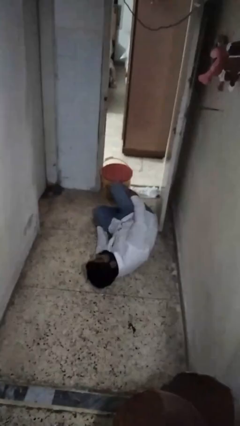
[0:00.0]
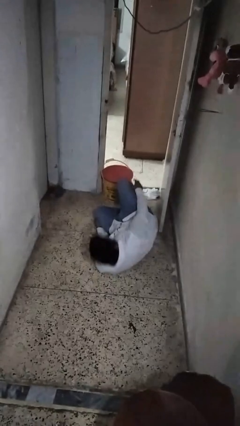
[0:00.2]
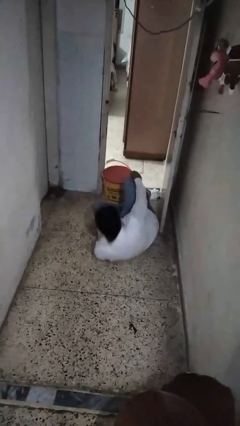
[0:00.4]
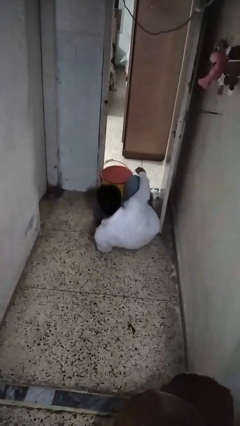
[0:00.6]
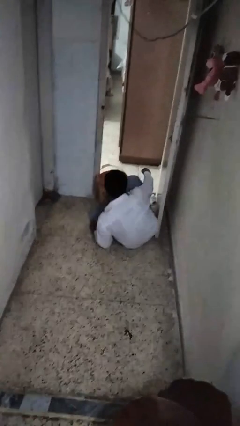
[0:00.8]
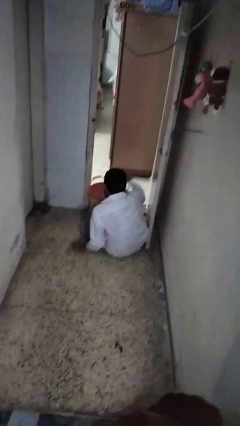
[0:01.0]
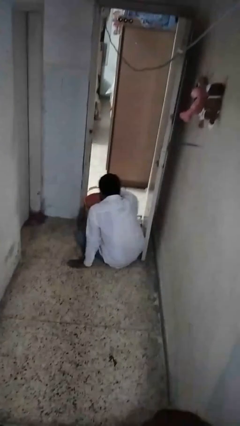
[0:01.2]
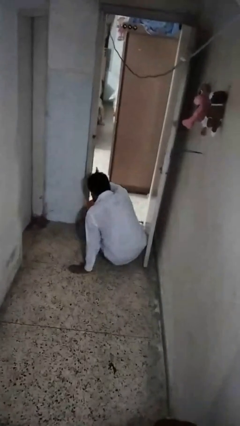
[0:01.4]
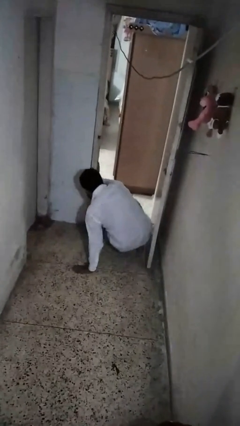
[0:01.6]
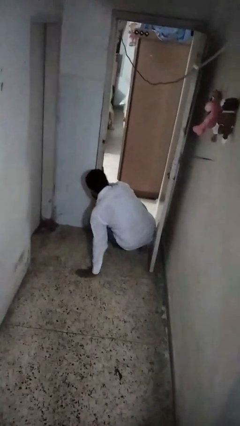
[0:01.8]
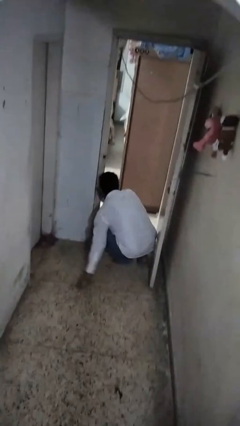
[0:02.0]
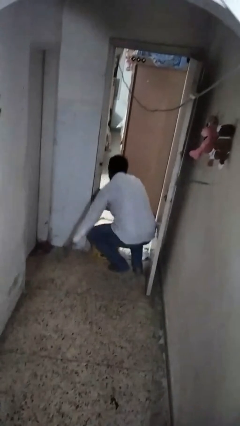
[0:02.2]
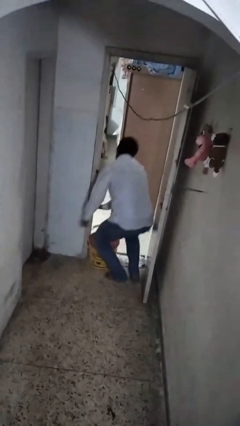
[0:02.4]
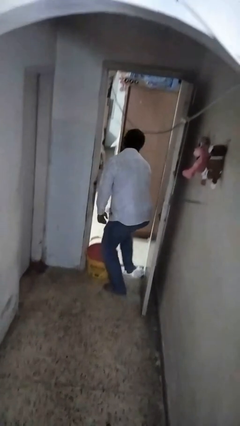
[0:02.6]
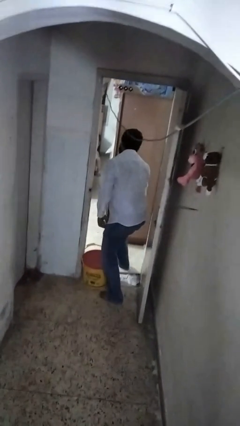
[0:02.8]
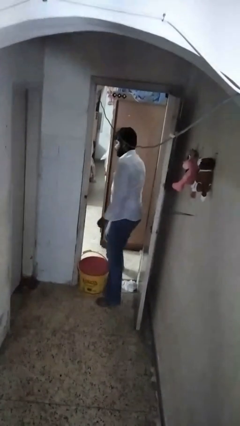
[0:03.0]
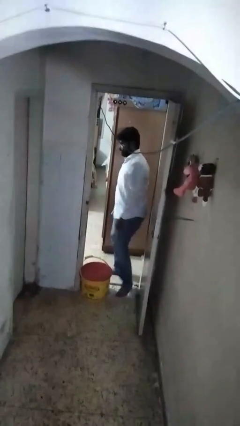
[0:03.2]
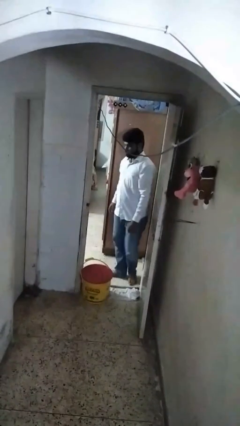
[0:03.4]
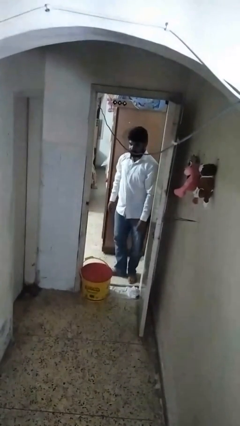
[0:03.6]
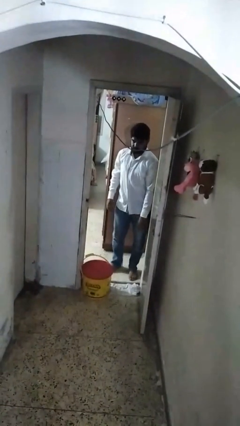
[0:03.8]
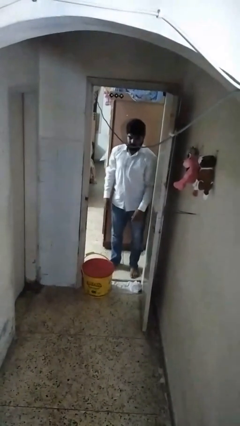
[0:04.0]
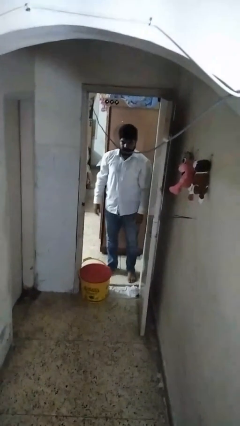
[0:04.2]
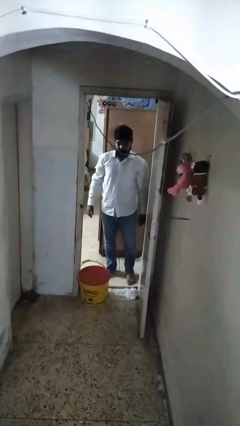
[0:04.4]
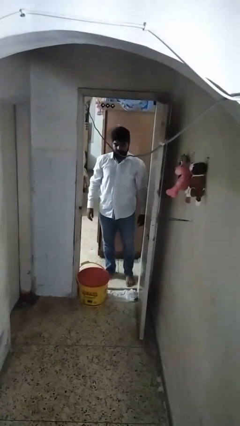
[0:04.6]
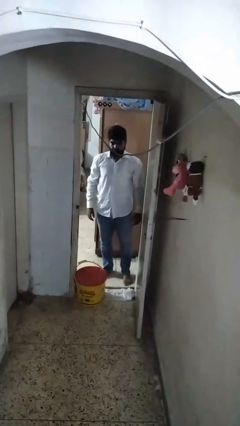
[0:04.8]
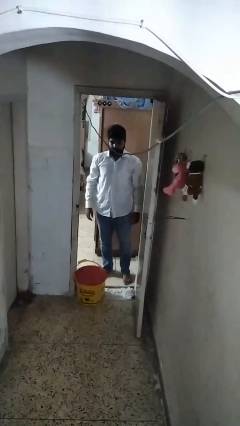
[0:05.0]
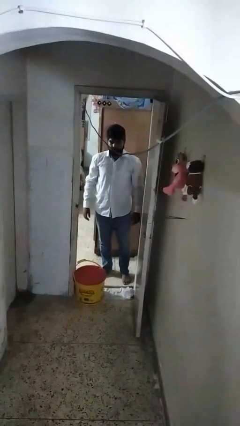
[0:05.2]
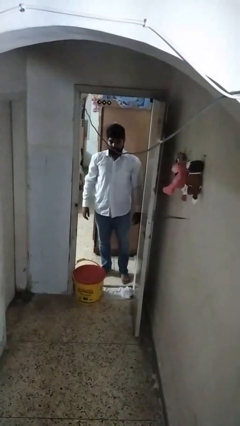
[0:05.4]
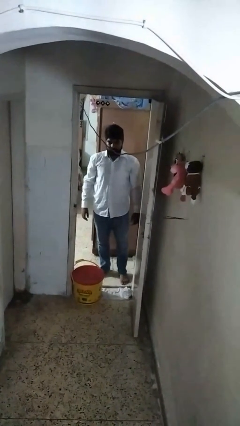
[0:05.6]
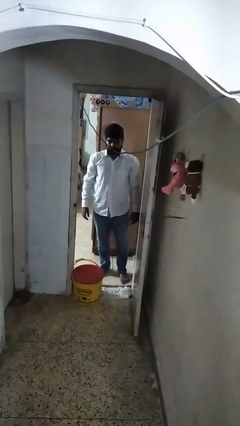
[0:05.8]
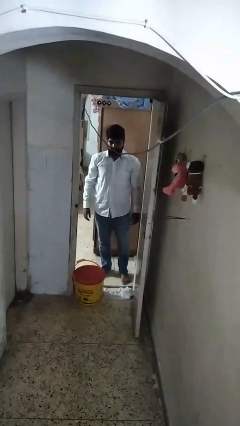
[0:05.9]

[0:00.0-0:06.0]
person stands up from floor

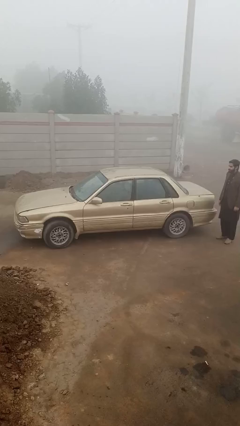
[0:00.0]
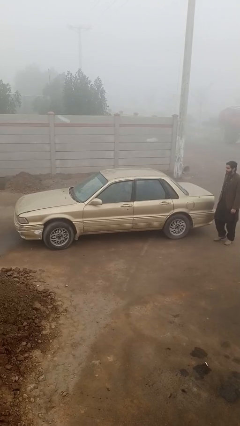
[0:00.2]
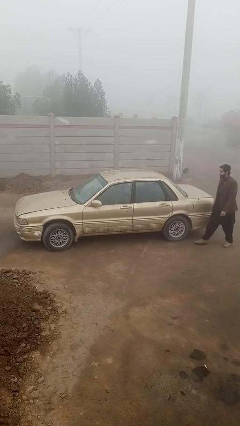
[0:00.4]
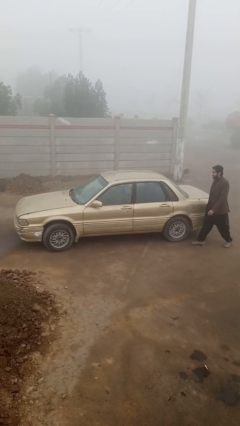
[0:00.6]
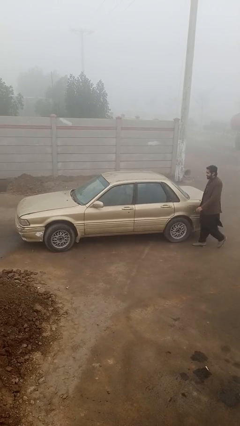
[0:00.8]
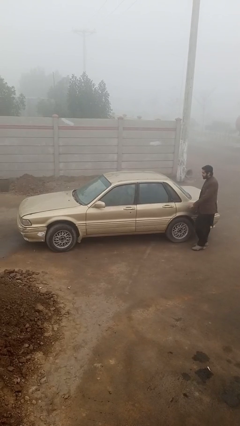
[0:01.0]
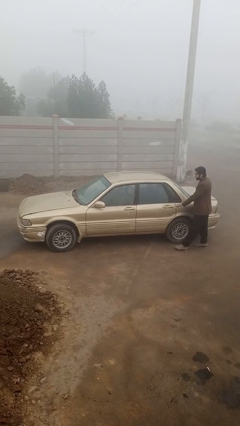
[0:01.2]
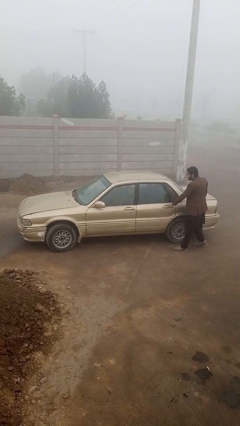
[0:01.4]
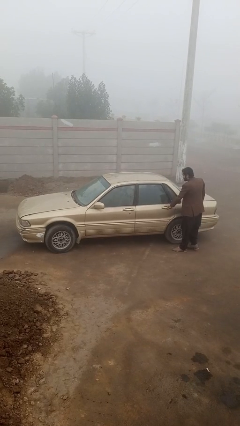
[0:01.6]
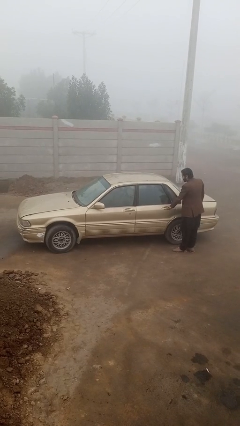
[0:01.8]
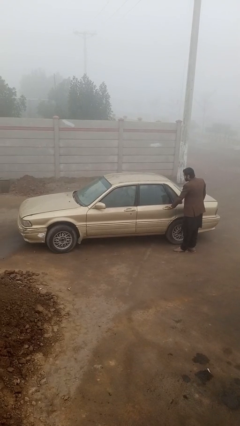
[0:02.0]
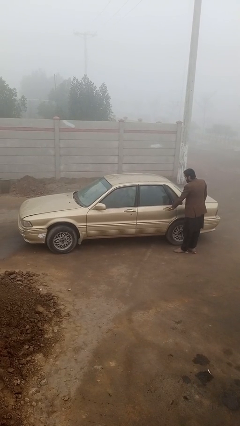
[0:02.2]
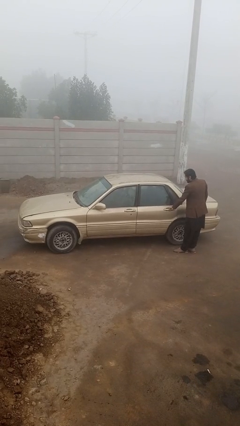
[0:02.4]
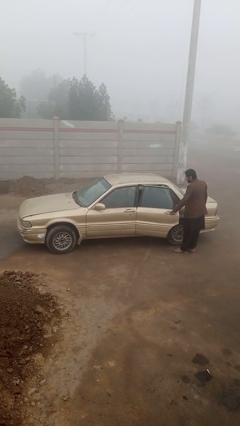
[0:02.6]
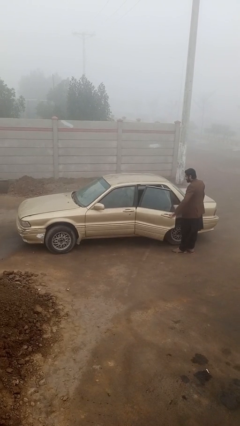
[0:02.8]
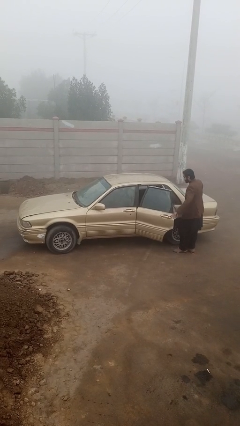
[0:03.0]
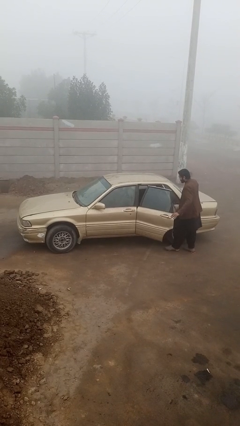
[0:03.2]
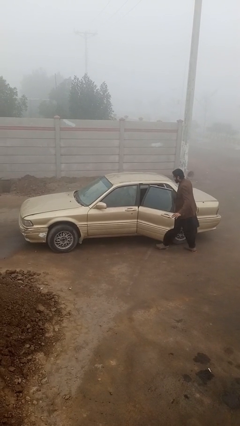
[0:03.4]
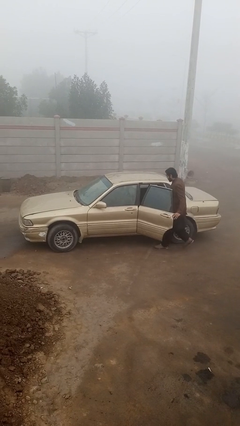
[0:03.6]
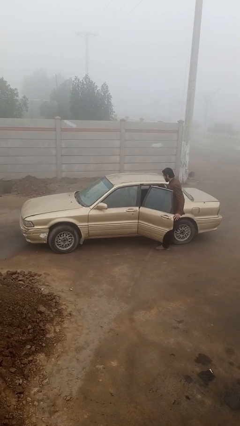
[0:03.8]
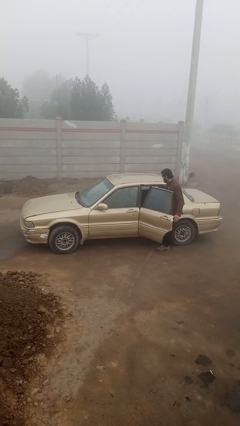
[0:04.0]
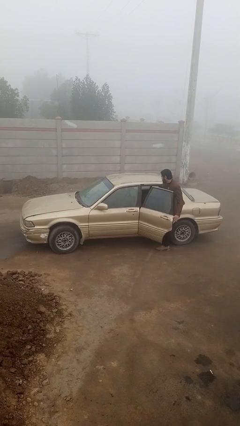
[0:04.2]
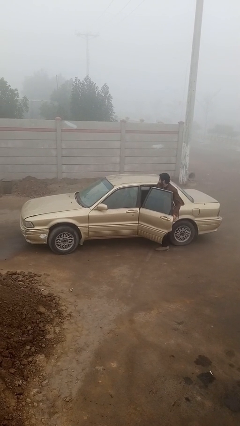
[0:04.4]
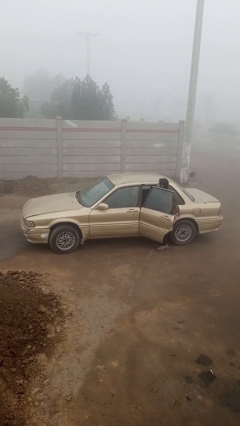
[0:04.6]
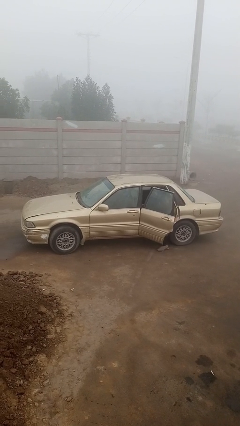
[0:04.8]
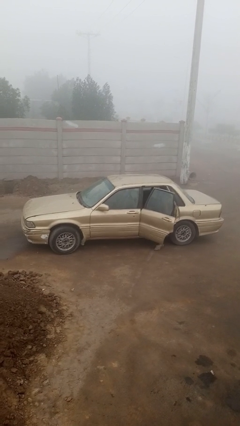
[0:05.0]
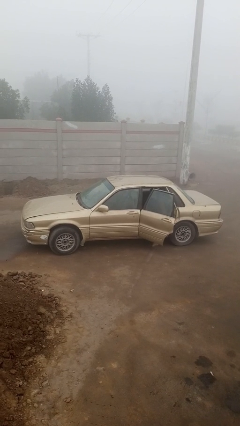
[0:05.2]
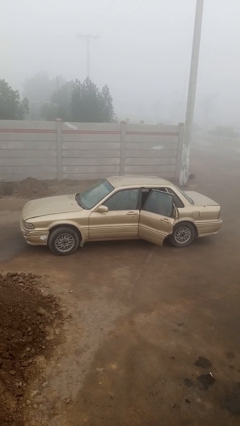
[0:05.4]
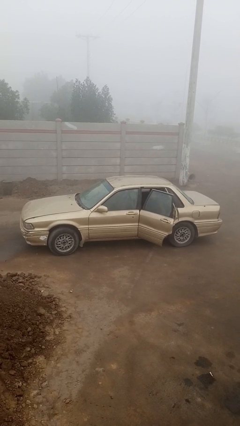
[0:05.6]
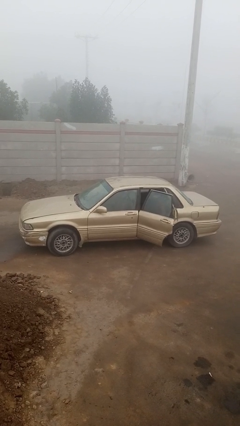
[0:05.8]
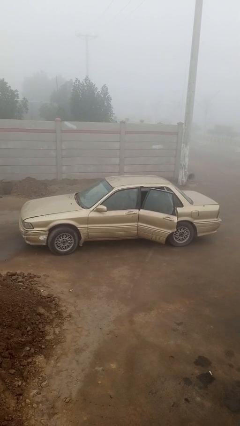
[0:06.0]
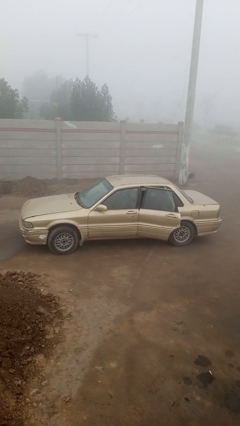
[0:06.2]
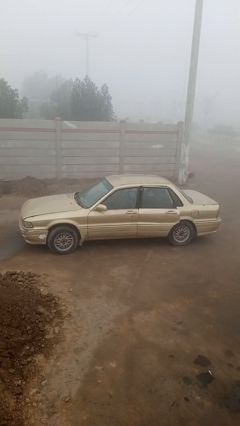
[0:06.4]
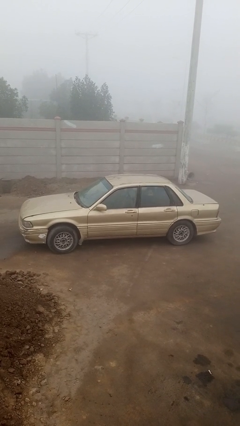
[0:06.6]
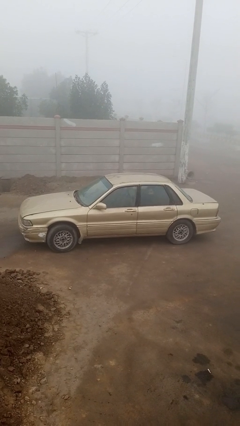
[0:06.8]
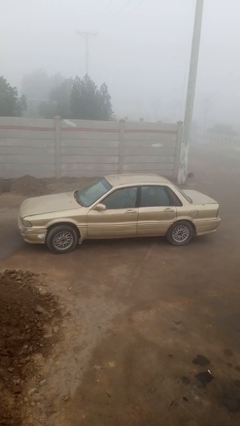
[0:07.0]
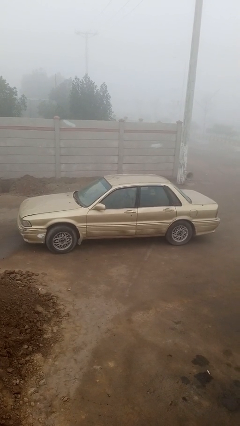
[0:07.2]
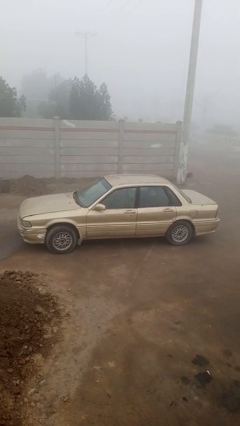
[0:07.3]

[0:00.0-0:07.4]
car picks up person

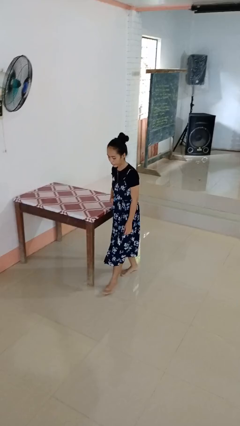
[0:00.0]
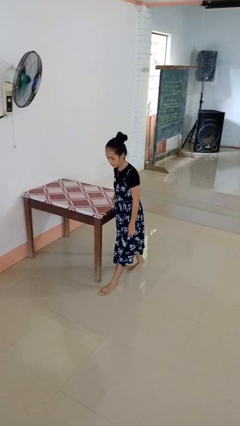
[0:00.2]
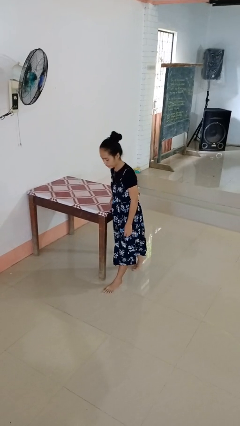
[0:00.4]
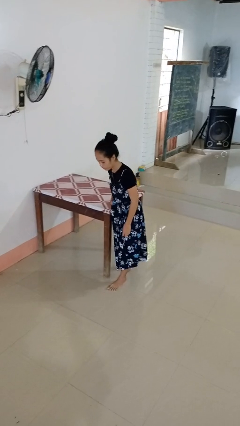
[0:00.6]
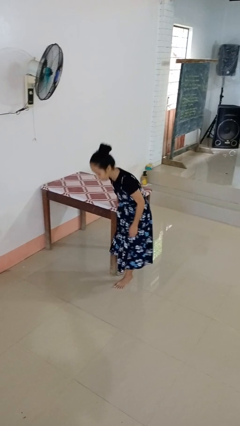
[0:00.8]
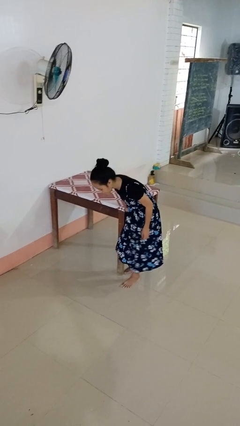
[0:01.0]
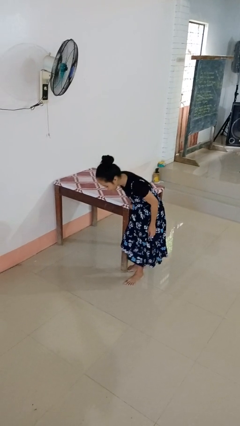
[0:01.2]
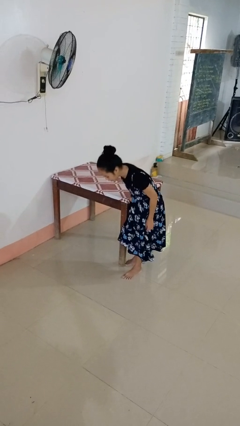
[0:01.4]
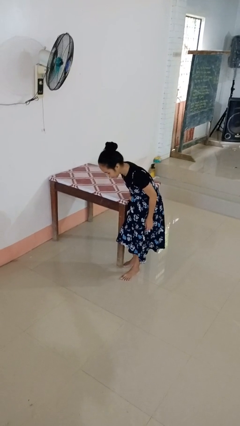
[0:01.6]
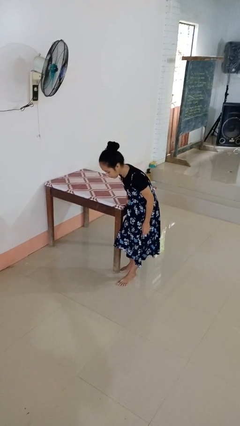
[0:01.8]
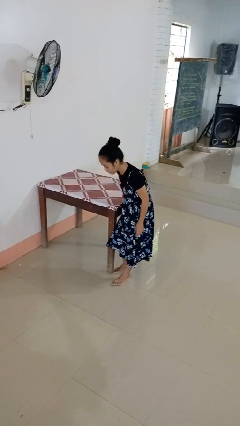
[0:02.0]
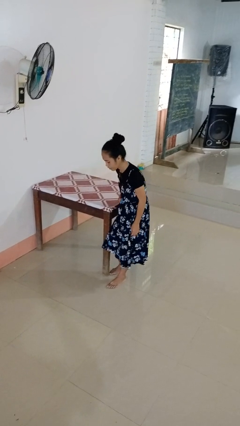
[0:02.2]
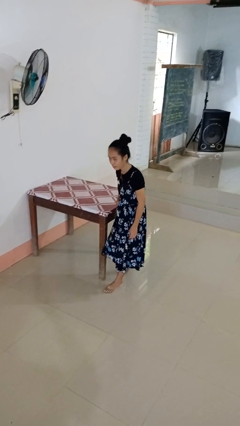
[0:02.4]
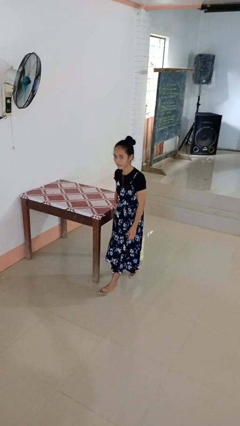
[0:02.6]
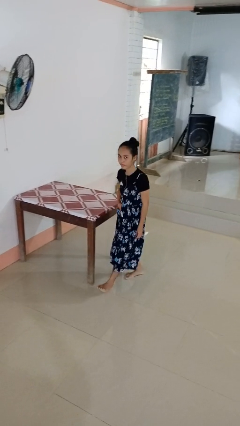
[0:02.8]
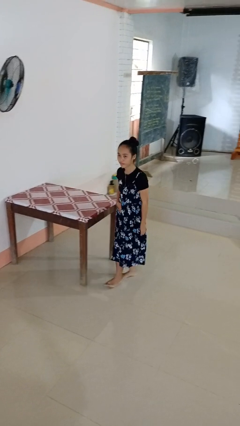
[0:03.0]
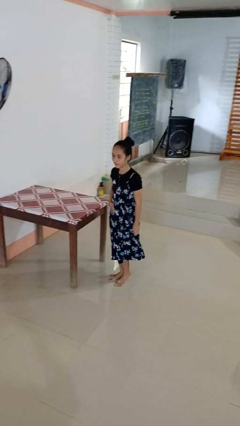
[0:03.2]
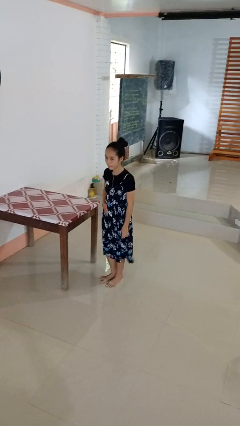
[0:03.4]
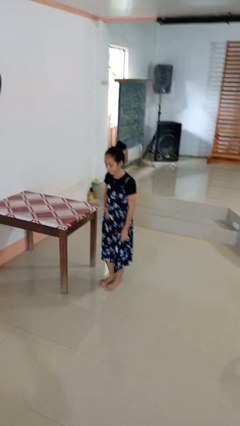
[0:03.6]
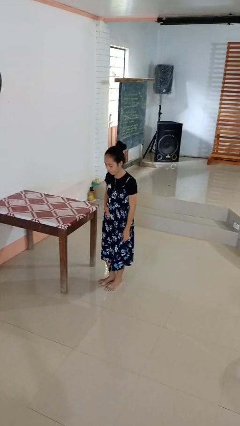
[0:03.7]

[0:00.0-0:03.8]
person stubs toe

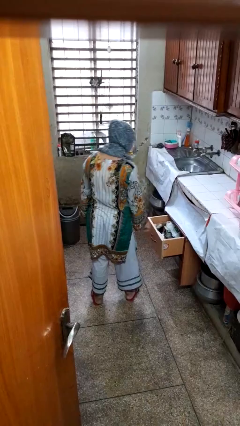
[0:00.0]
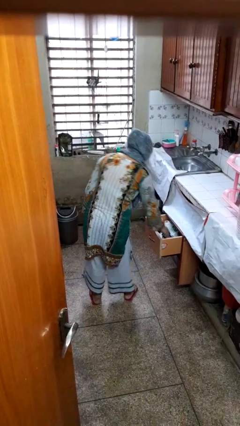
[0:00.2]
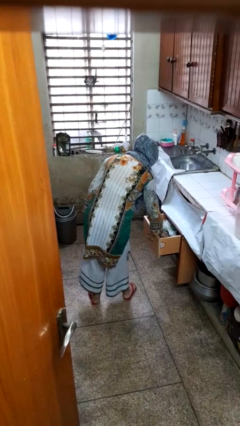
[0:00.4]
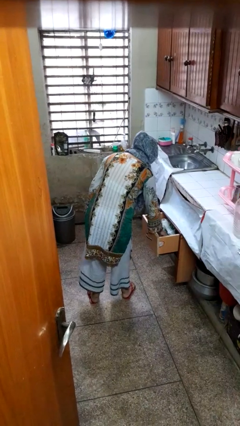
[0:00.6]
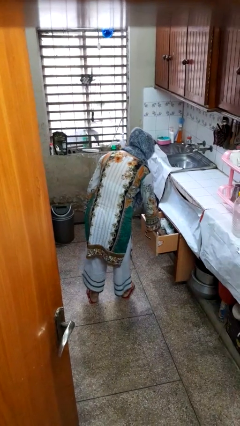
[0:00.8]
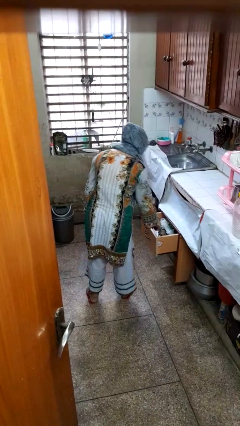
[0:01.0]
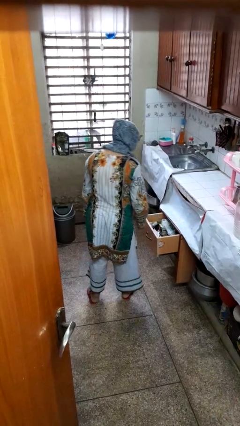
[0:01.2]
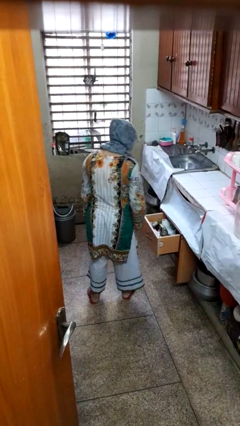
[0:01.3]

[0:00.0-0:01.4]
person searches in kitchen drawer
